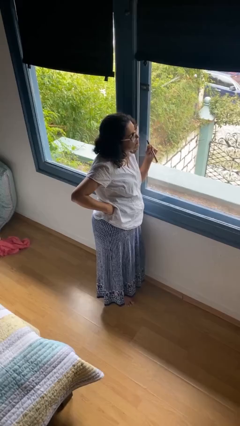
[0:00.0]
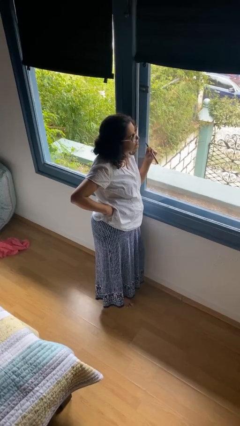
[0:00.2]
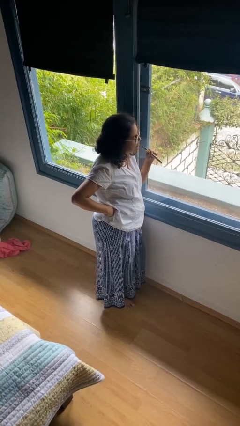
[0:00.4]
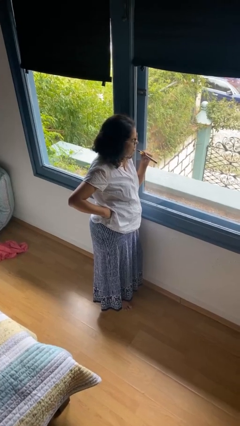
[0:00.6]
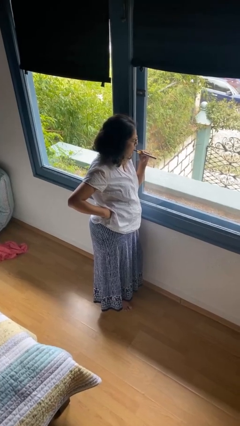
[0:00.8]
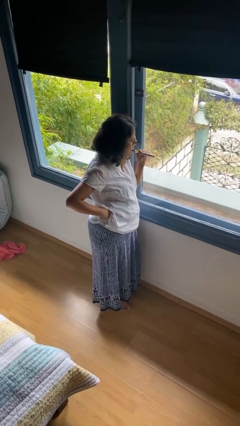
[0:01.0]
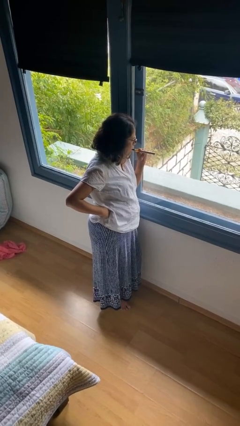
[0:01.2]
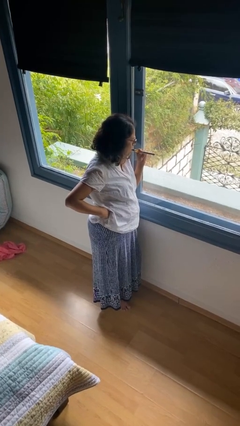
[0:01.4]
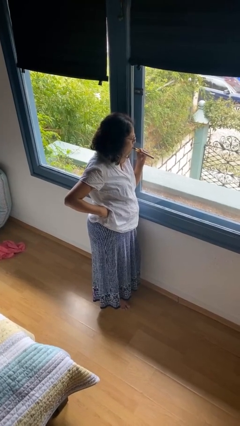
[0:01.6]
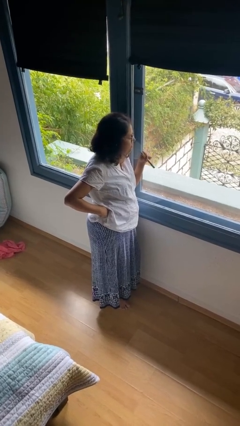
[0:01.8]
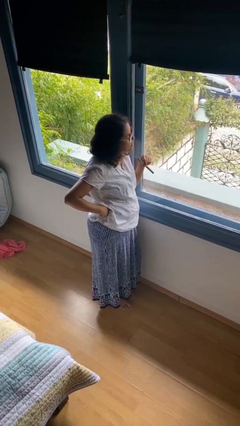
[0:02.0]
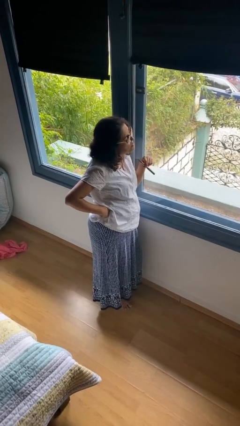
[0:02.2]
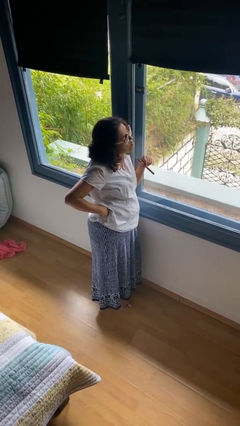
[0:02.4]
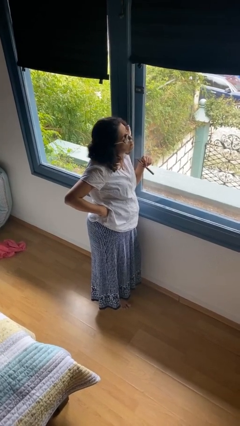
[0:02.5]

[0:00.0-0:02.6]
person vapes

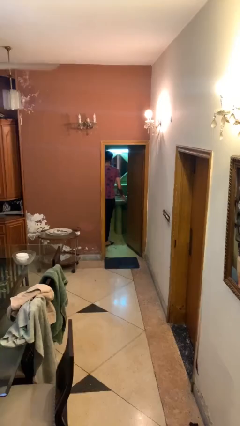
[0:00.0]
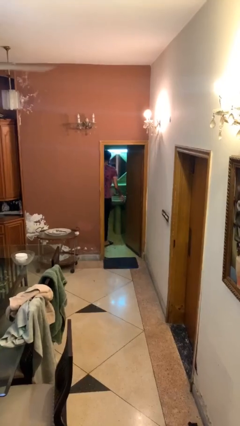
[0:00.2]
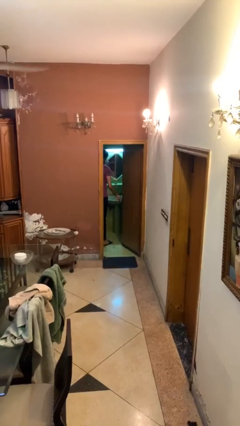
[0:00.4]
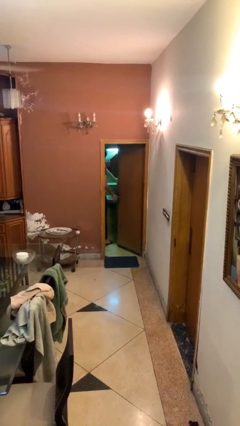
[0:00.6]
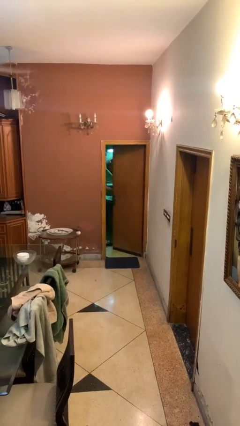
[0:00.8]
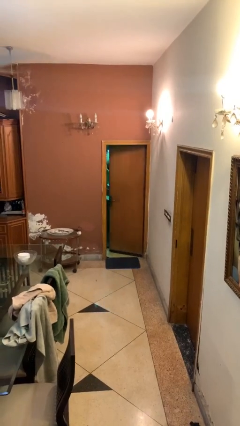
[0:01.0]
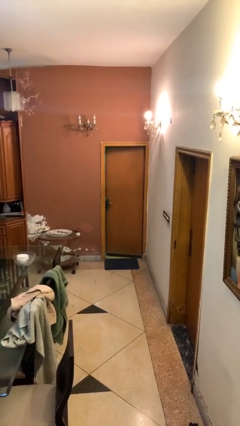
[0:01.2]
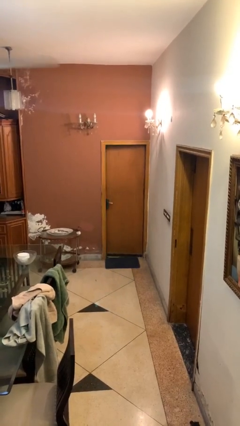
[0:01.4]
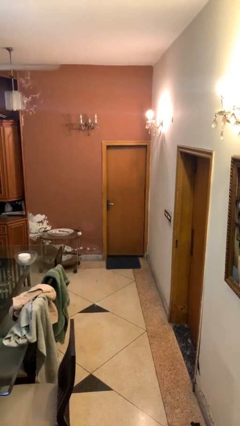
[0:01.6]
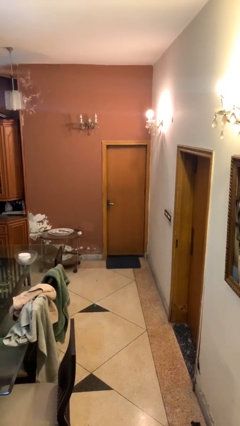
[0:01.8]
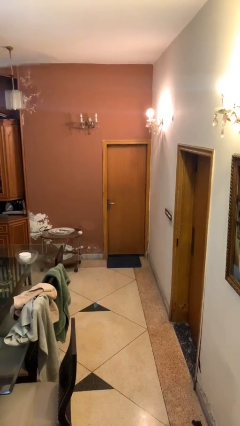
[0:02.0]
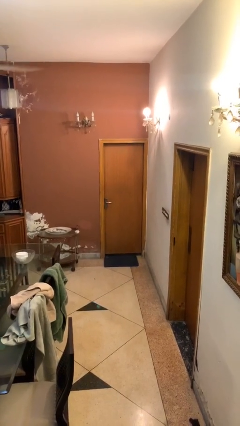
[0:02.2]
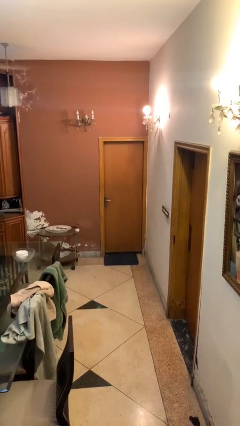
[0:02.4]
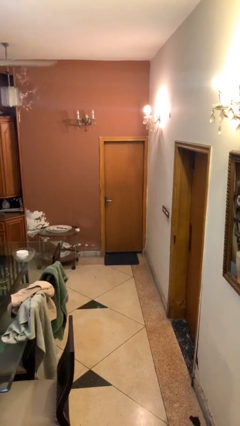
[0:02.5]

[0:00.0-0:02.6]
person closes facility door

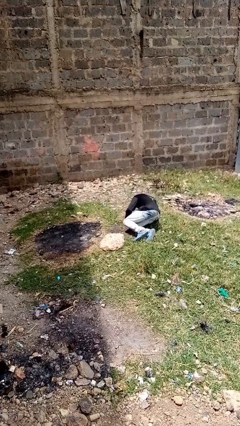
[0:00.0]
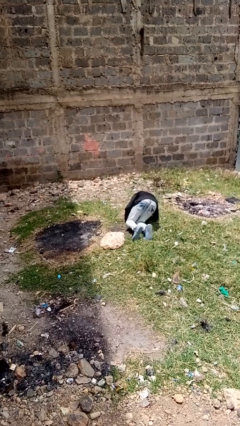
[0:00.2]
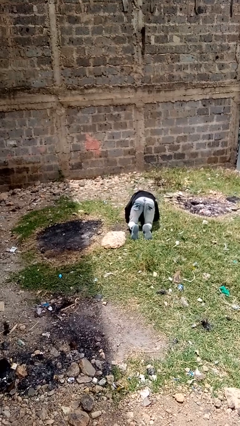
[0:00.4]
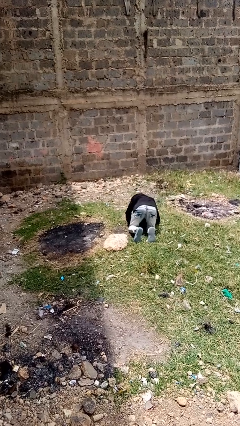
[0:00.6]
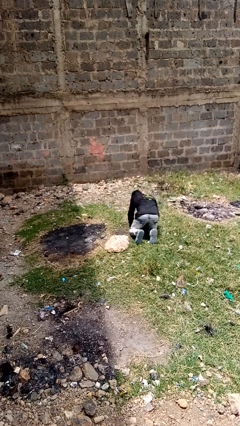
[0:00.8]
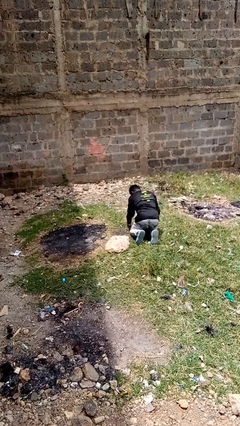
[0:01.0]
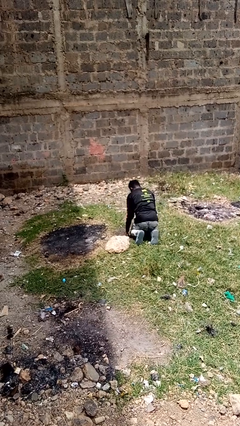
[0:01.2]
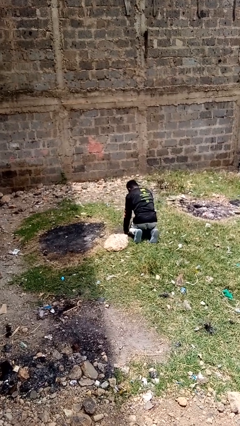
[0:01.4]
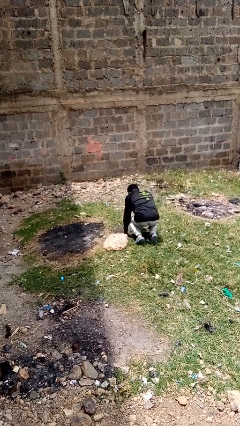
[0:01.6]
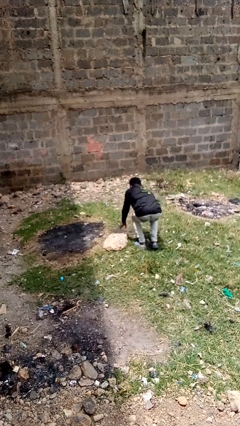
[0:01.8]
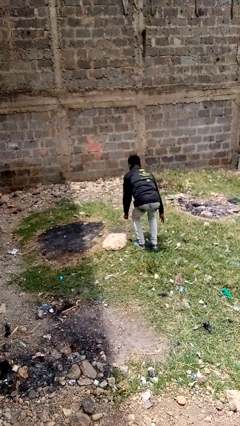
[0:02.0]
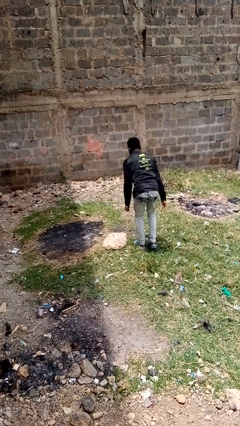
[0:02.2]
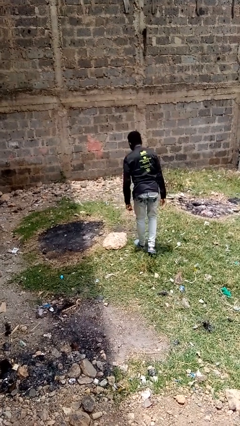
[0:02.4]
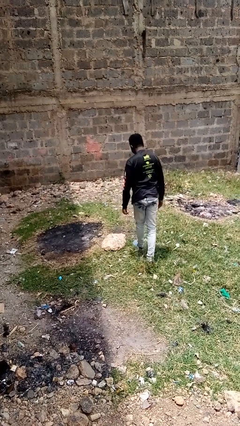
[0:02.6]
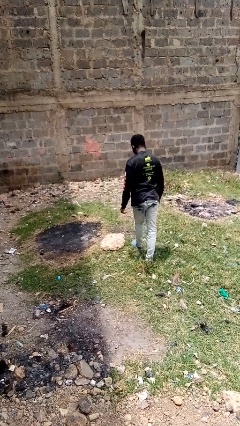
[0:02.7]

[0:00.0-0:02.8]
person stands up from floor

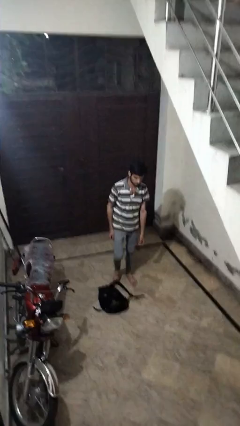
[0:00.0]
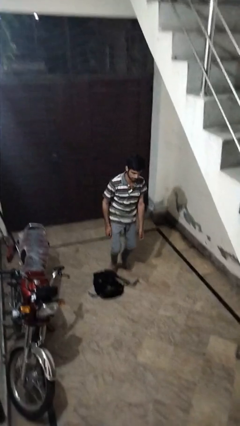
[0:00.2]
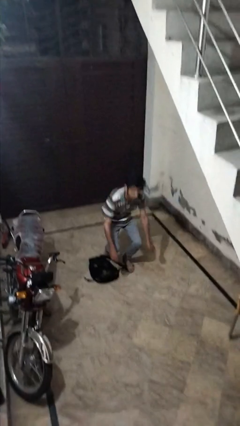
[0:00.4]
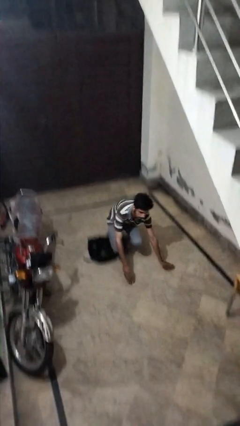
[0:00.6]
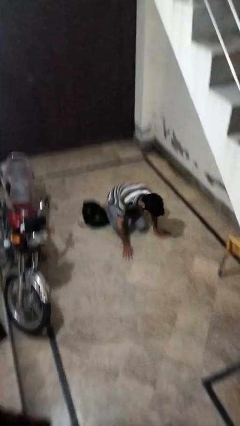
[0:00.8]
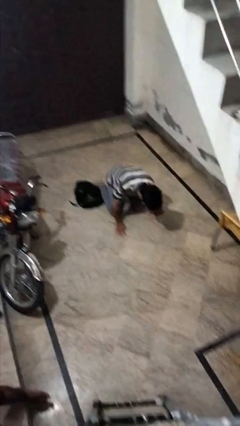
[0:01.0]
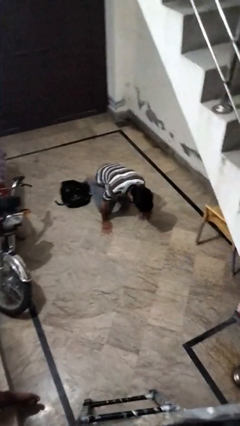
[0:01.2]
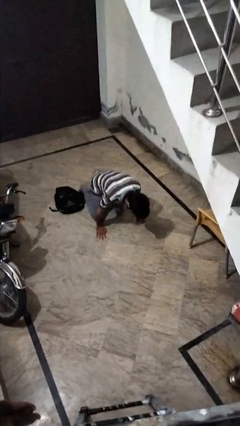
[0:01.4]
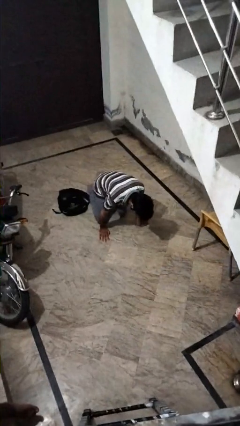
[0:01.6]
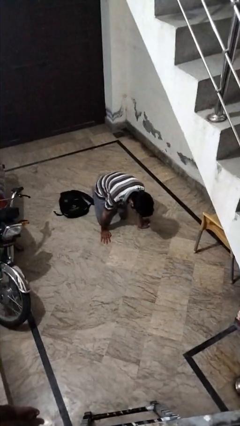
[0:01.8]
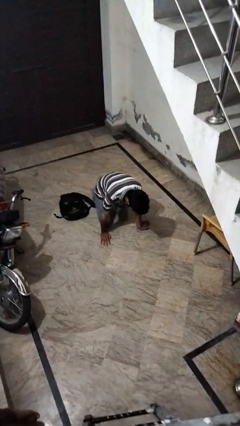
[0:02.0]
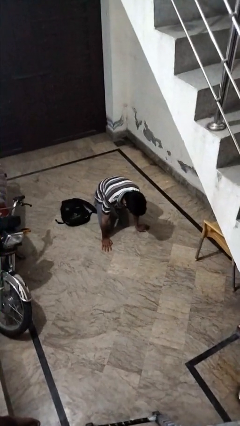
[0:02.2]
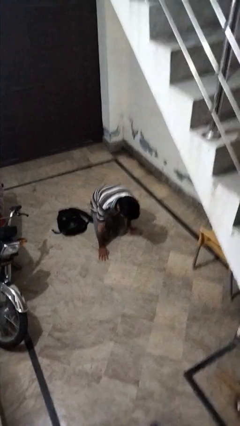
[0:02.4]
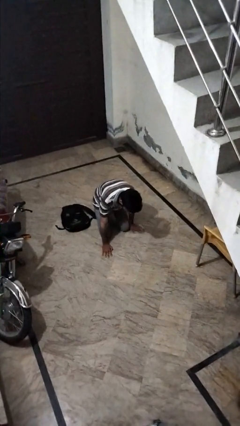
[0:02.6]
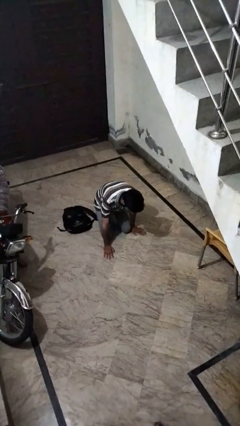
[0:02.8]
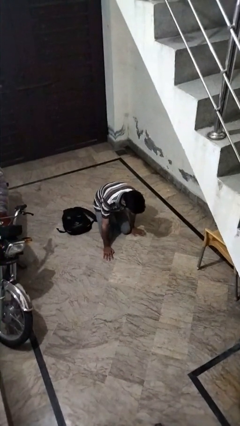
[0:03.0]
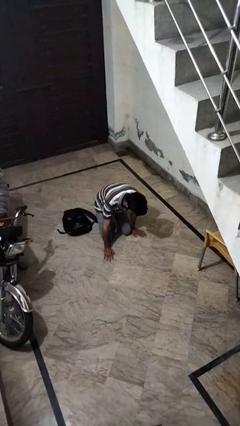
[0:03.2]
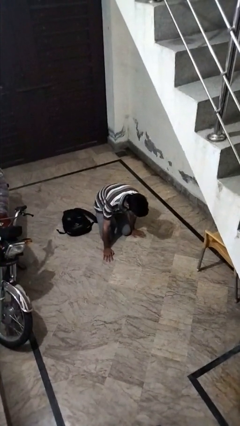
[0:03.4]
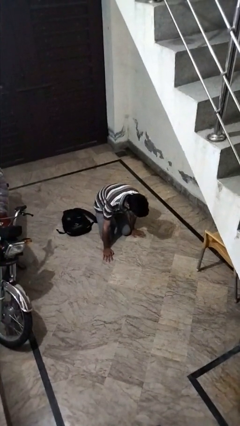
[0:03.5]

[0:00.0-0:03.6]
person trips on object on floor

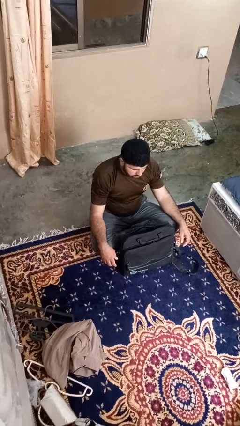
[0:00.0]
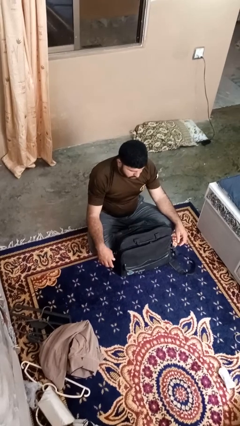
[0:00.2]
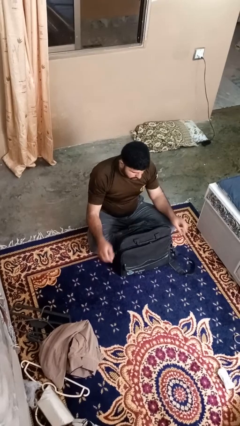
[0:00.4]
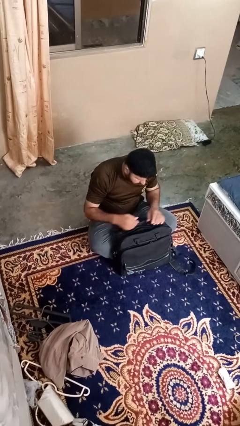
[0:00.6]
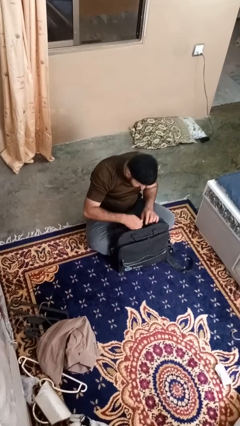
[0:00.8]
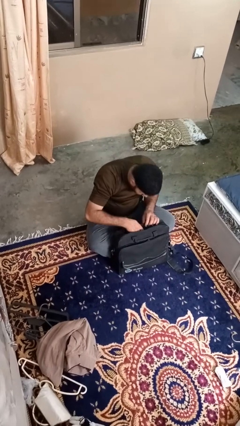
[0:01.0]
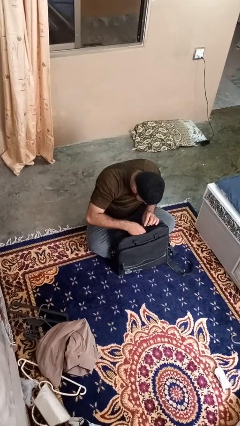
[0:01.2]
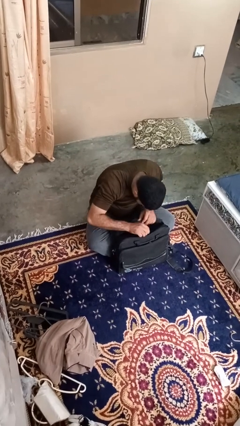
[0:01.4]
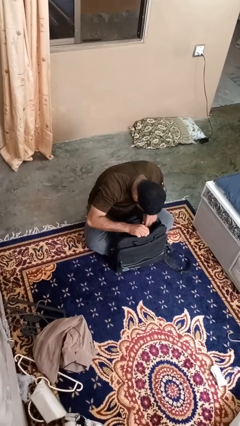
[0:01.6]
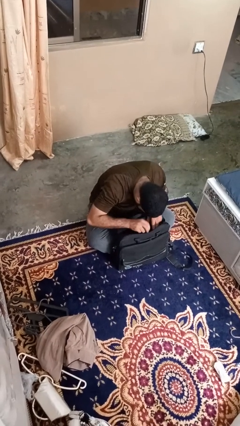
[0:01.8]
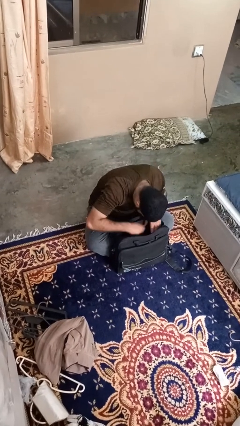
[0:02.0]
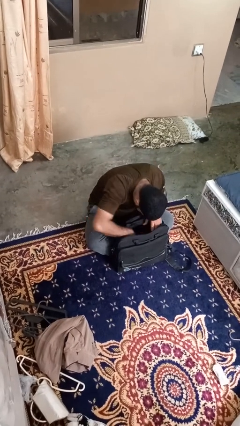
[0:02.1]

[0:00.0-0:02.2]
person searches in bag

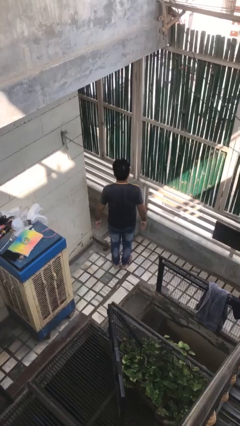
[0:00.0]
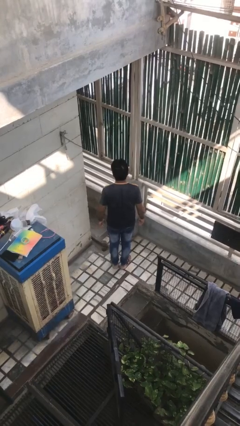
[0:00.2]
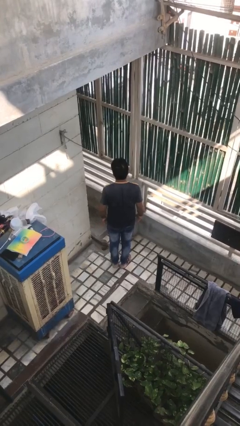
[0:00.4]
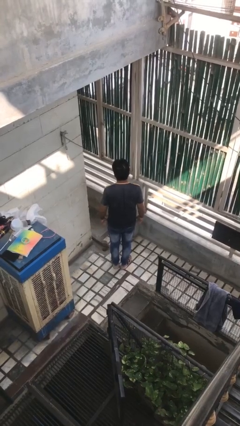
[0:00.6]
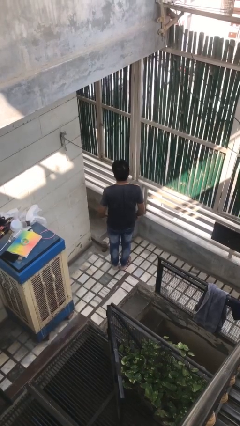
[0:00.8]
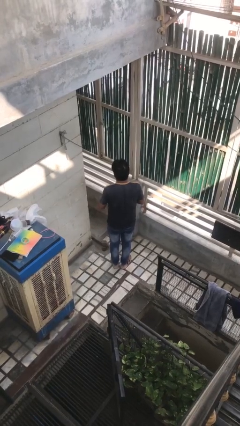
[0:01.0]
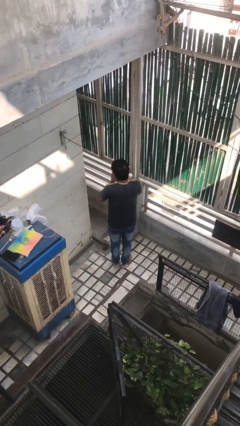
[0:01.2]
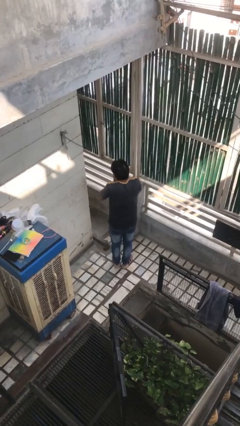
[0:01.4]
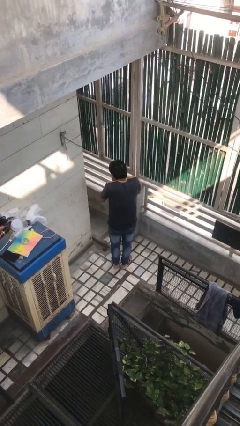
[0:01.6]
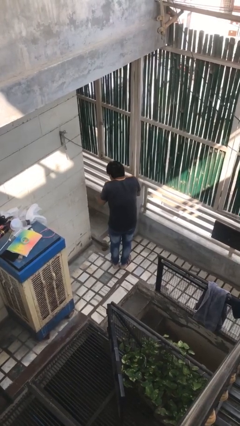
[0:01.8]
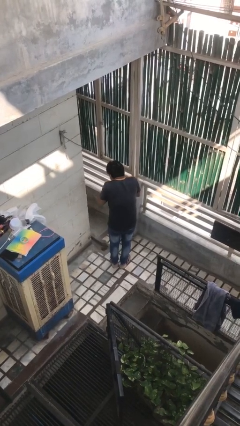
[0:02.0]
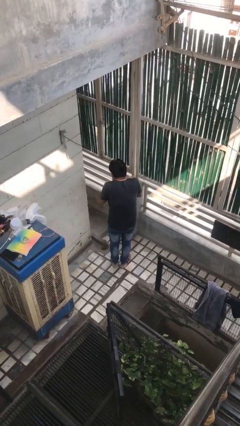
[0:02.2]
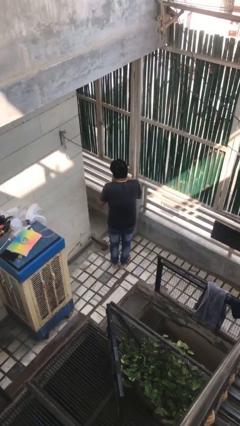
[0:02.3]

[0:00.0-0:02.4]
person sneezes into hand

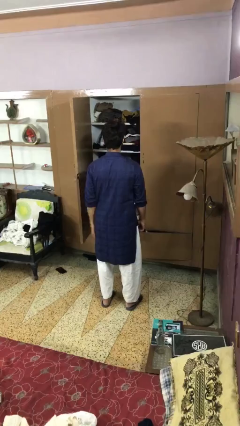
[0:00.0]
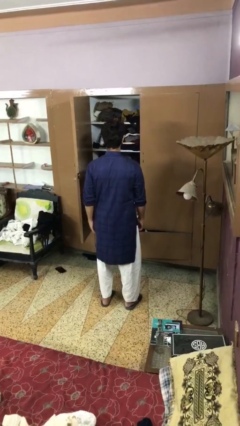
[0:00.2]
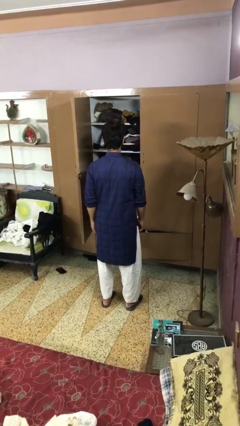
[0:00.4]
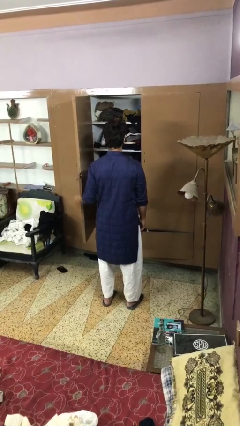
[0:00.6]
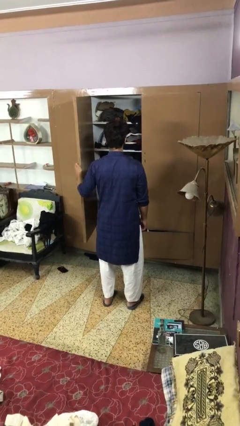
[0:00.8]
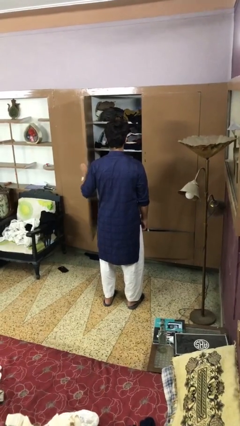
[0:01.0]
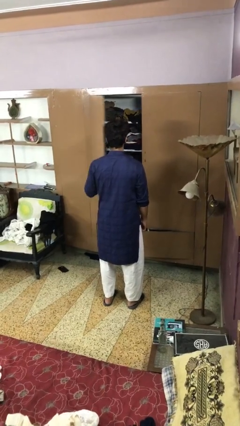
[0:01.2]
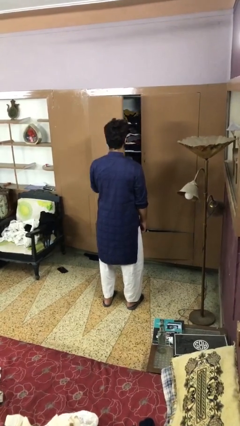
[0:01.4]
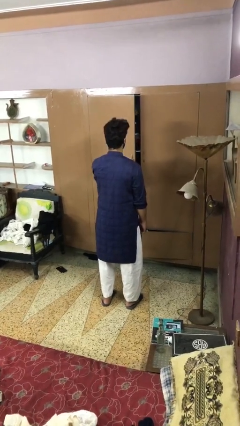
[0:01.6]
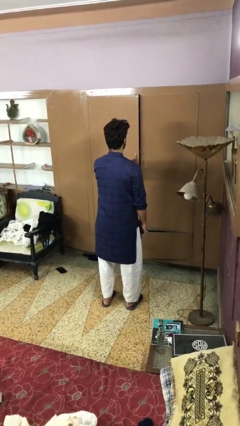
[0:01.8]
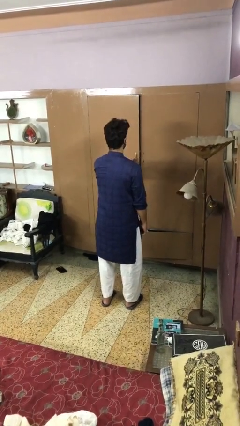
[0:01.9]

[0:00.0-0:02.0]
person closes closet door
